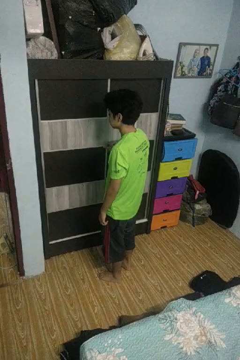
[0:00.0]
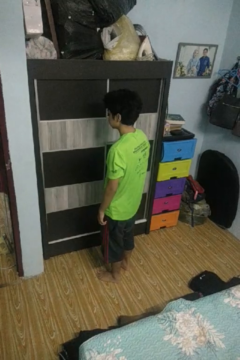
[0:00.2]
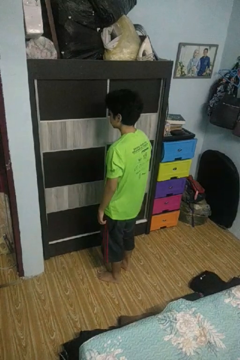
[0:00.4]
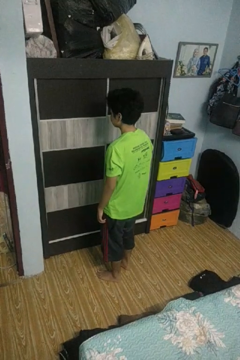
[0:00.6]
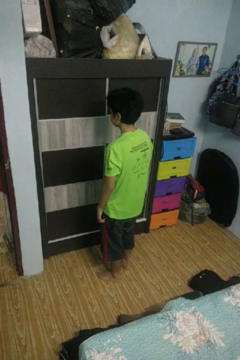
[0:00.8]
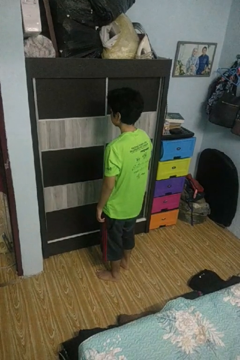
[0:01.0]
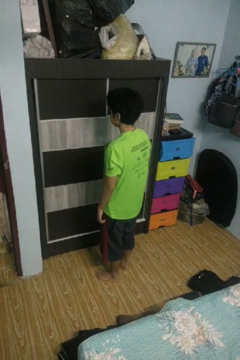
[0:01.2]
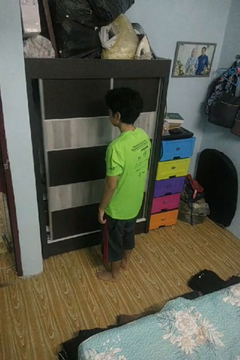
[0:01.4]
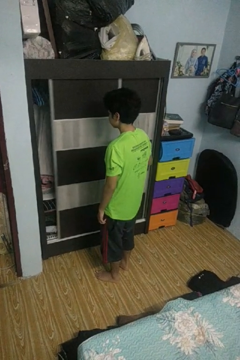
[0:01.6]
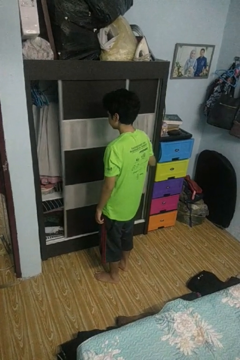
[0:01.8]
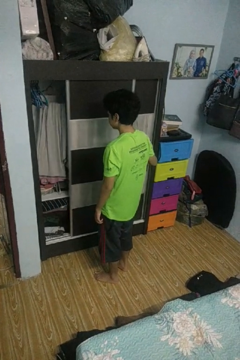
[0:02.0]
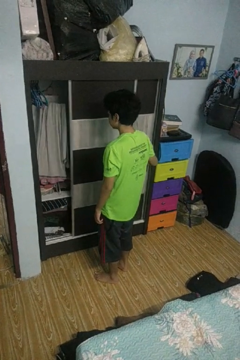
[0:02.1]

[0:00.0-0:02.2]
person opens closet door

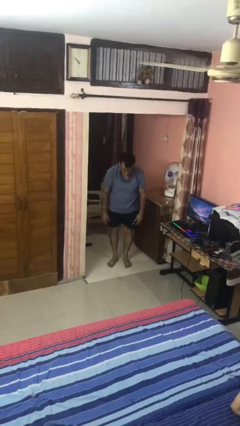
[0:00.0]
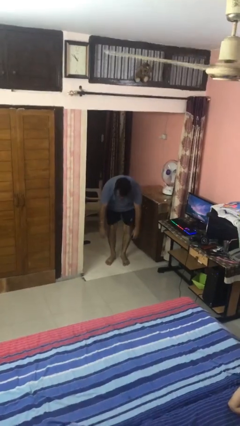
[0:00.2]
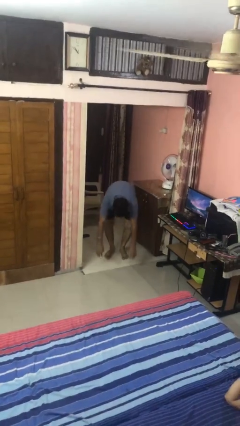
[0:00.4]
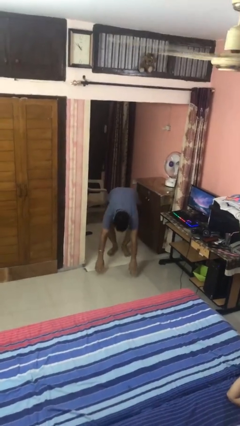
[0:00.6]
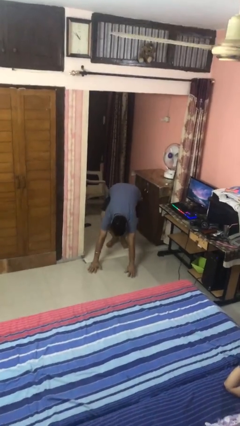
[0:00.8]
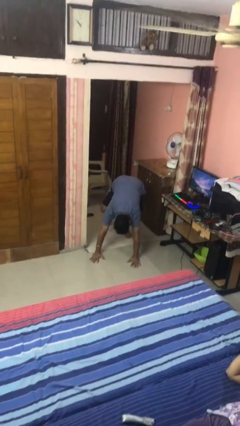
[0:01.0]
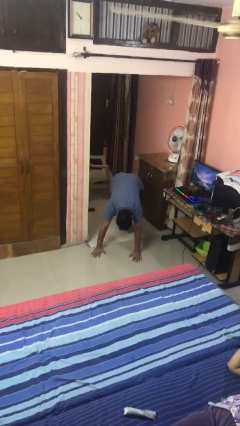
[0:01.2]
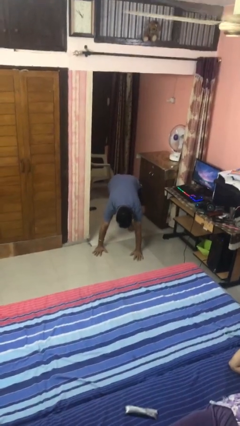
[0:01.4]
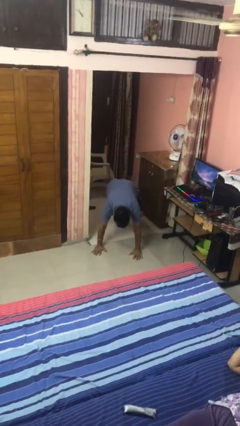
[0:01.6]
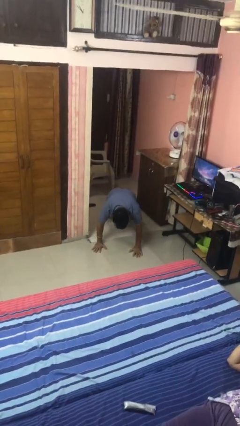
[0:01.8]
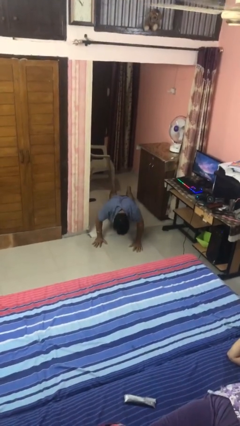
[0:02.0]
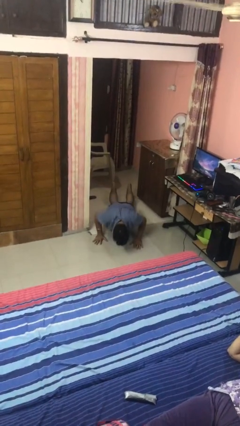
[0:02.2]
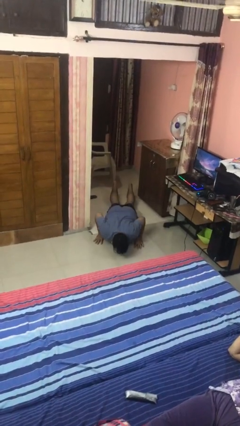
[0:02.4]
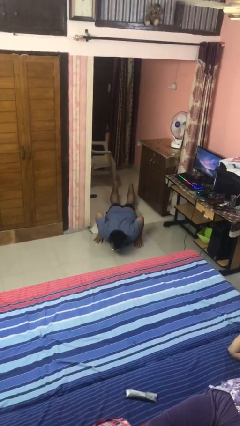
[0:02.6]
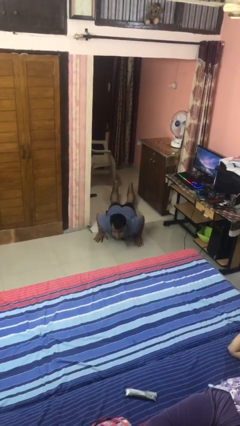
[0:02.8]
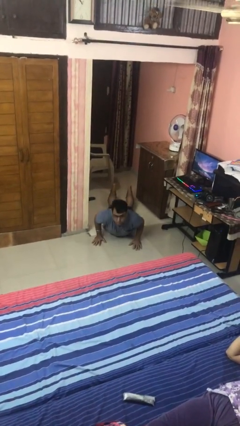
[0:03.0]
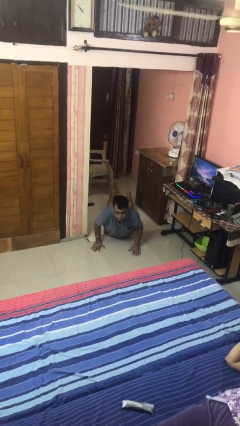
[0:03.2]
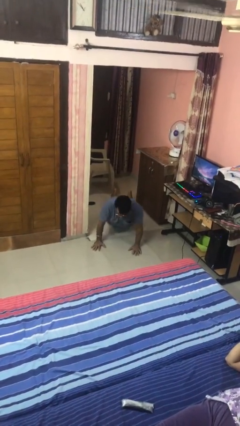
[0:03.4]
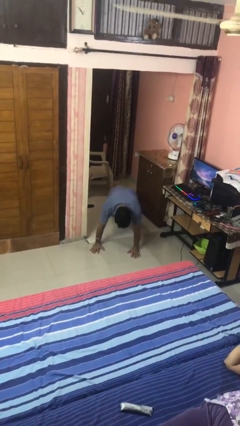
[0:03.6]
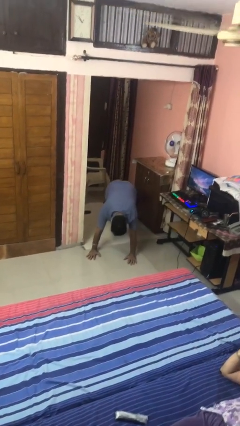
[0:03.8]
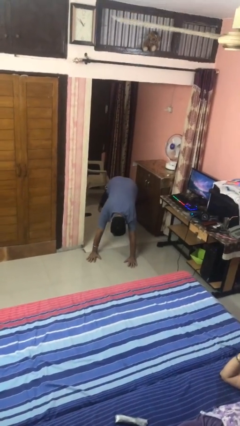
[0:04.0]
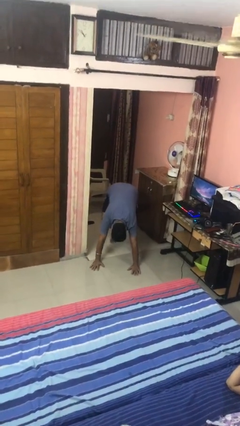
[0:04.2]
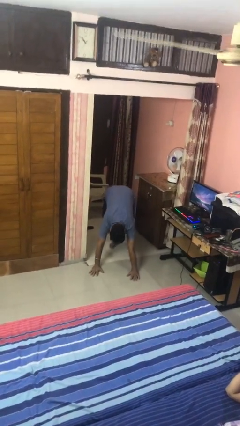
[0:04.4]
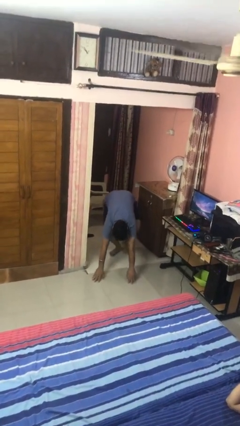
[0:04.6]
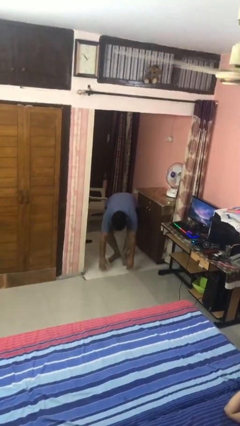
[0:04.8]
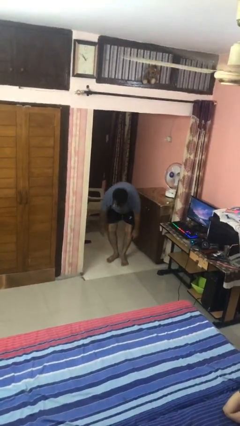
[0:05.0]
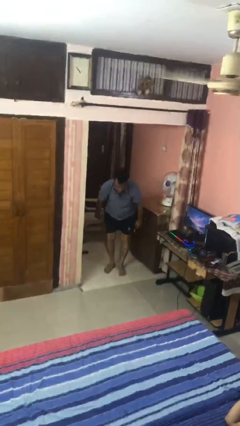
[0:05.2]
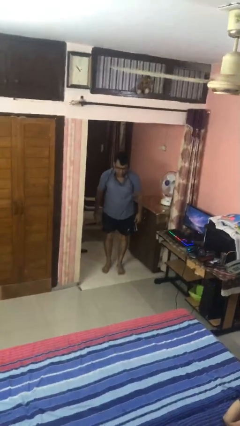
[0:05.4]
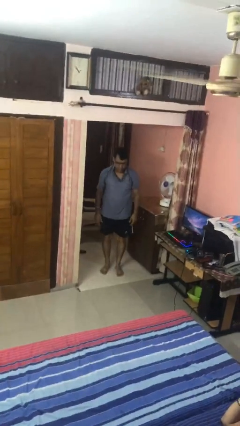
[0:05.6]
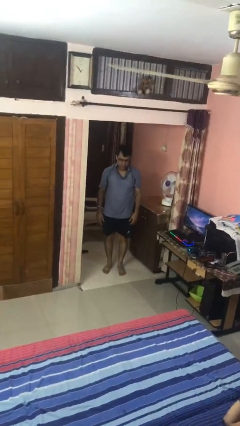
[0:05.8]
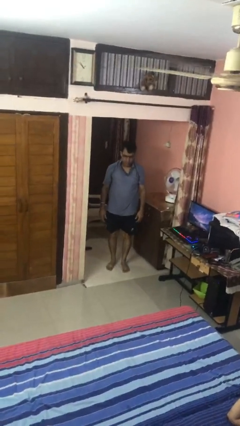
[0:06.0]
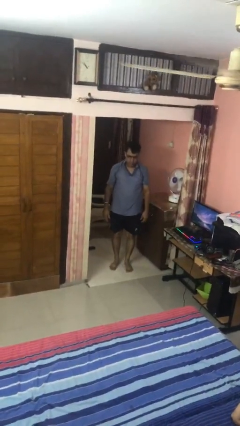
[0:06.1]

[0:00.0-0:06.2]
person exercises with pushup

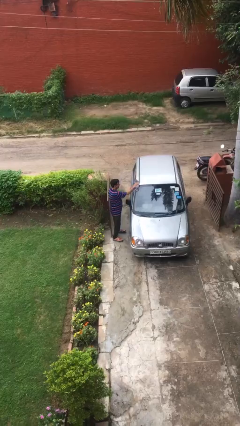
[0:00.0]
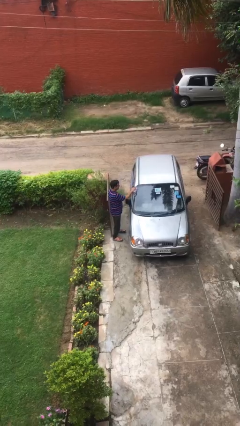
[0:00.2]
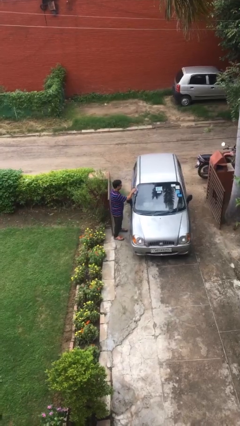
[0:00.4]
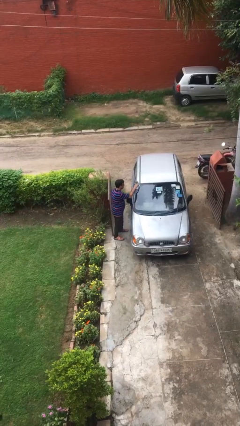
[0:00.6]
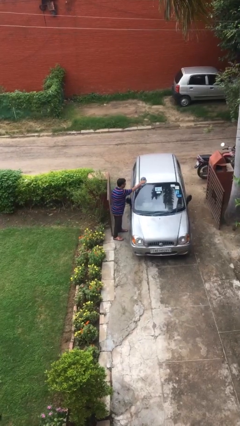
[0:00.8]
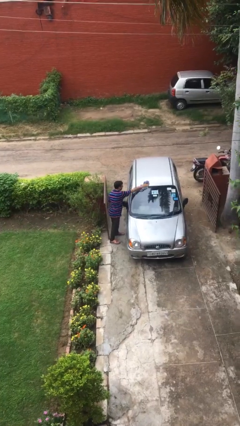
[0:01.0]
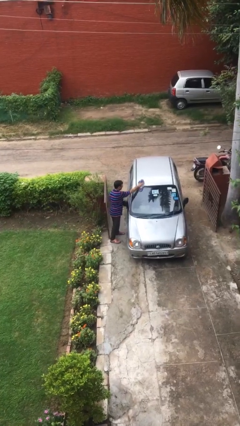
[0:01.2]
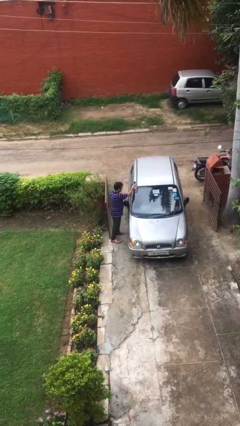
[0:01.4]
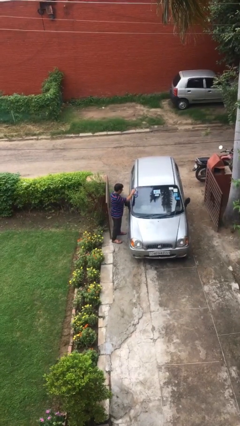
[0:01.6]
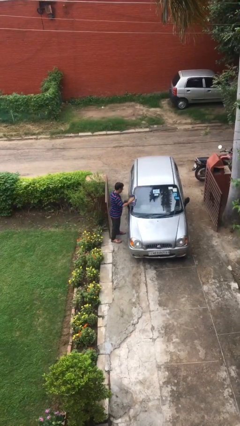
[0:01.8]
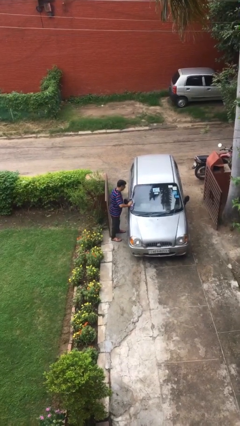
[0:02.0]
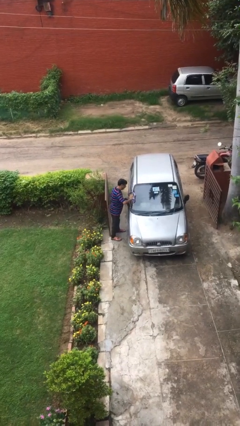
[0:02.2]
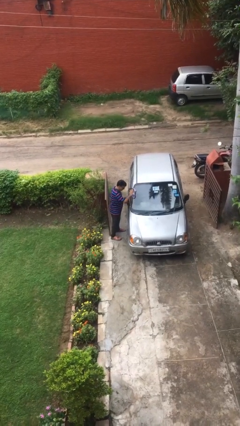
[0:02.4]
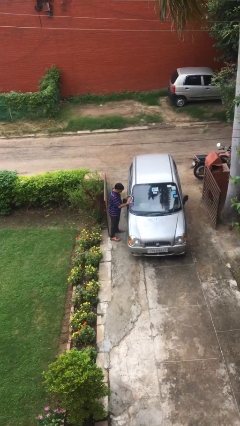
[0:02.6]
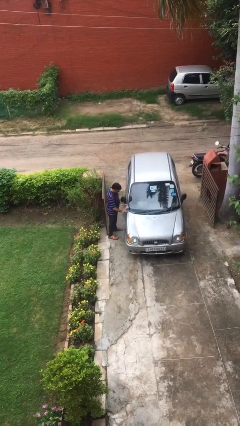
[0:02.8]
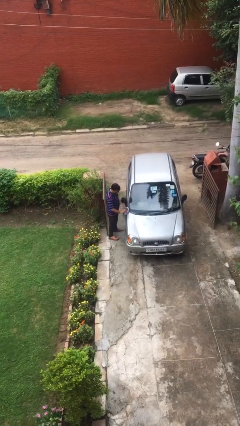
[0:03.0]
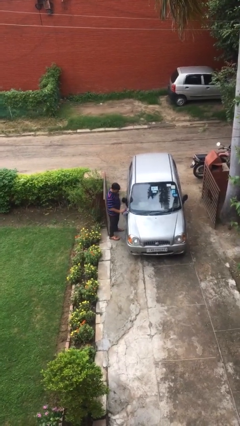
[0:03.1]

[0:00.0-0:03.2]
person polishes car with rag

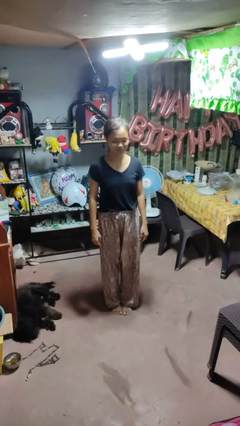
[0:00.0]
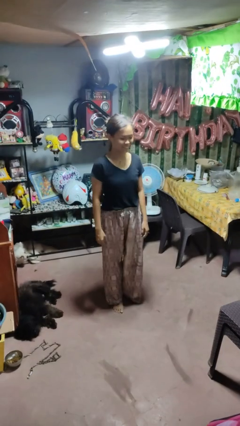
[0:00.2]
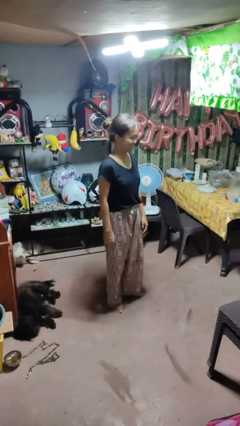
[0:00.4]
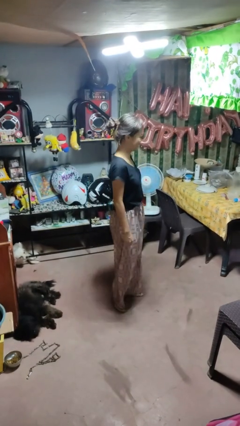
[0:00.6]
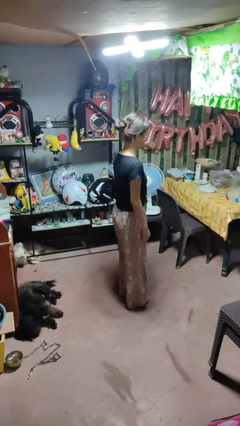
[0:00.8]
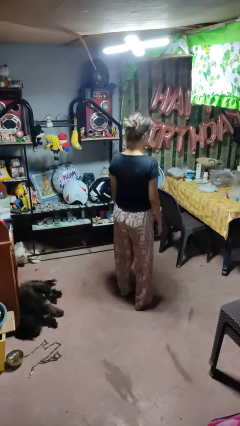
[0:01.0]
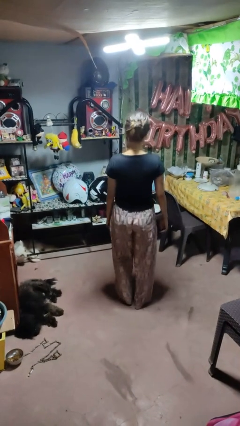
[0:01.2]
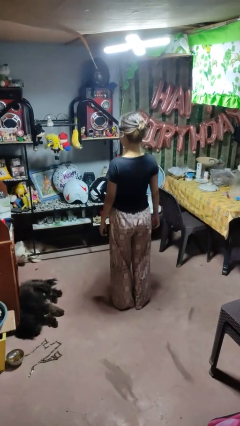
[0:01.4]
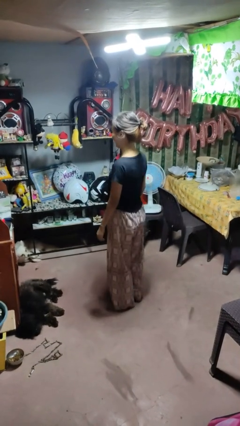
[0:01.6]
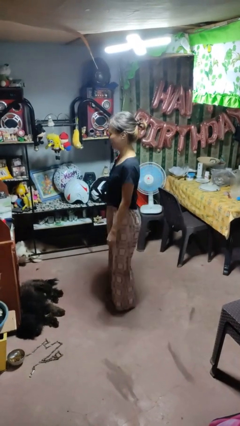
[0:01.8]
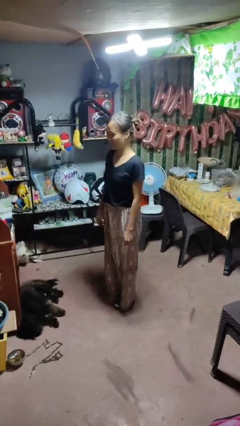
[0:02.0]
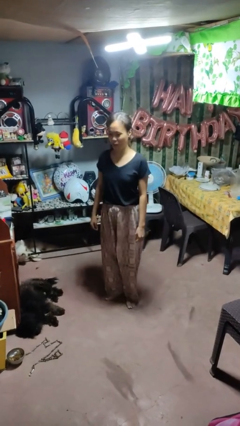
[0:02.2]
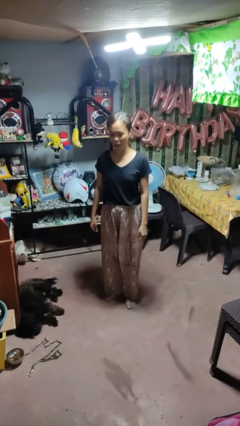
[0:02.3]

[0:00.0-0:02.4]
person twirls

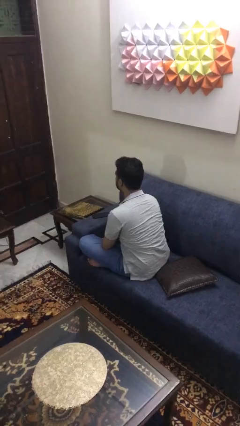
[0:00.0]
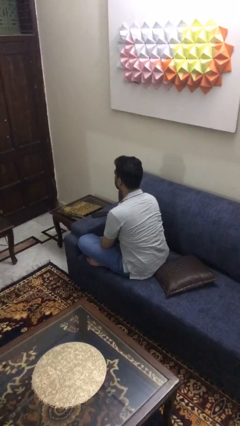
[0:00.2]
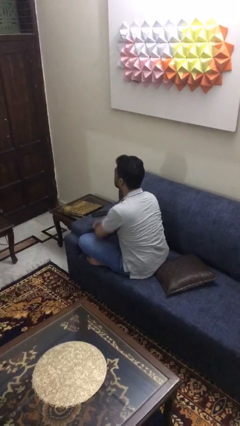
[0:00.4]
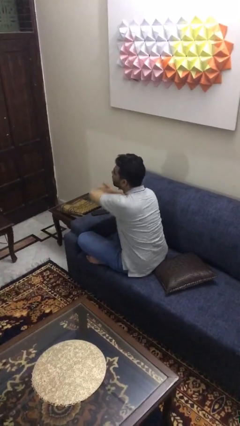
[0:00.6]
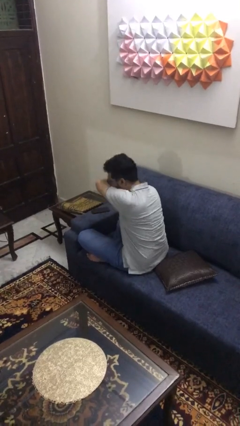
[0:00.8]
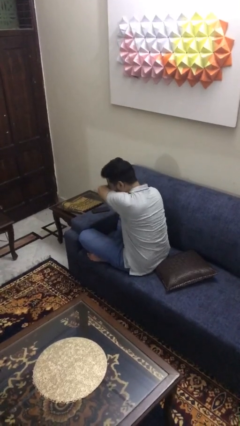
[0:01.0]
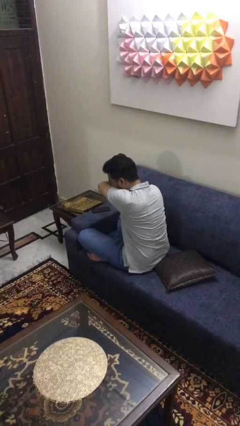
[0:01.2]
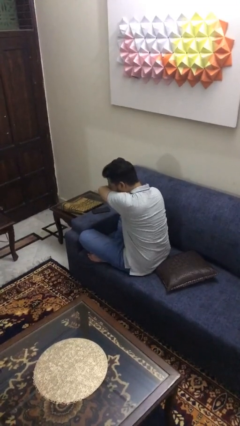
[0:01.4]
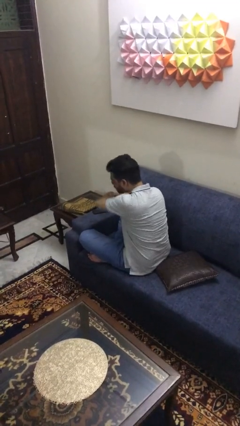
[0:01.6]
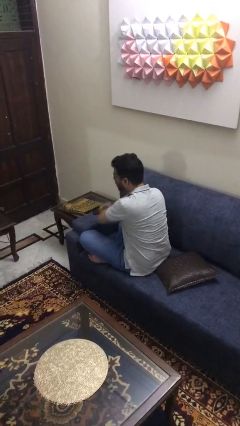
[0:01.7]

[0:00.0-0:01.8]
person sneezes into arm

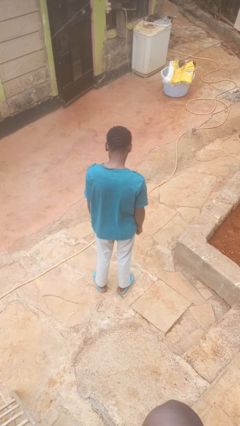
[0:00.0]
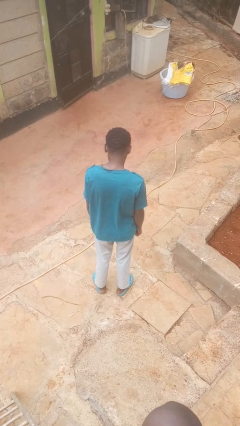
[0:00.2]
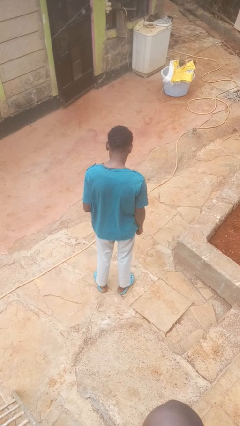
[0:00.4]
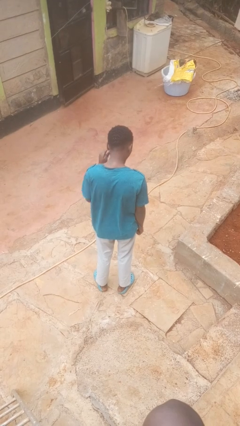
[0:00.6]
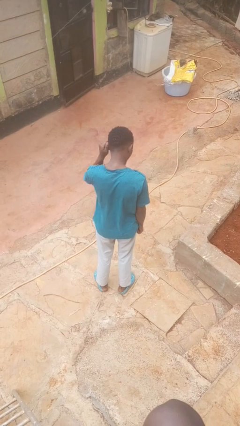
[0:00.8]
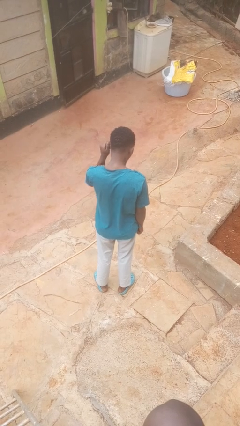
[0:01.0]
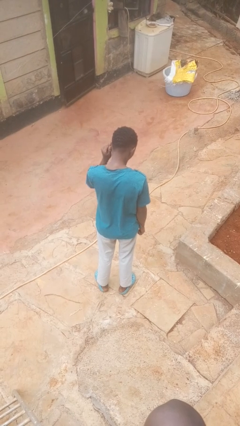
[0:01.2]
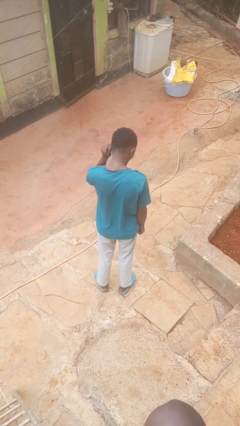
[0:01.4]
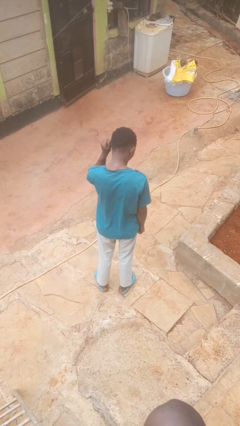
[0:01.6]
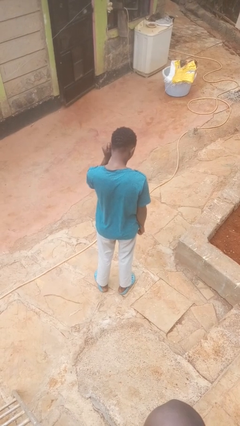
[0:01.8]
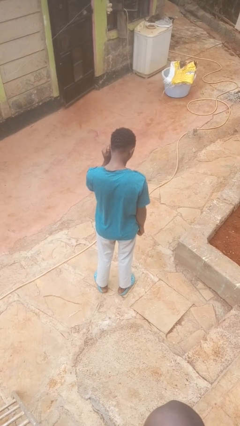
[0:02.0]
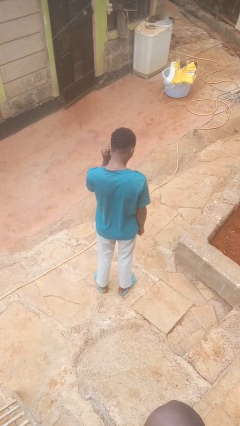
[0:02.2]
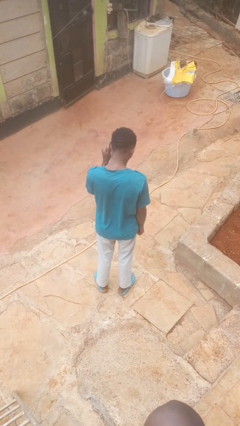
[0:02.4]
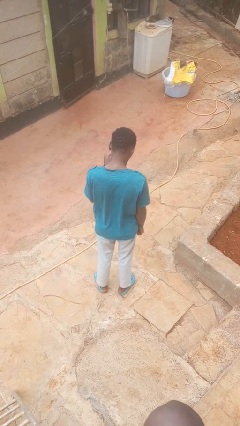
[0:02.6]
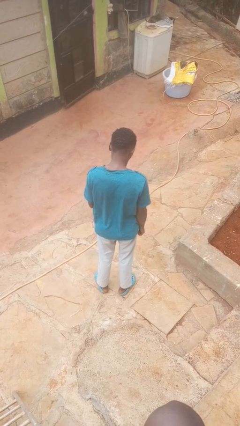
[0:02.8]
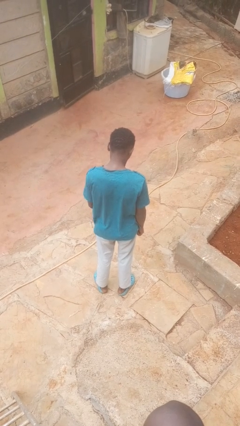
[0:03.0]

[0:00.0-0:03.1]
person touches earlobe
